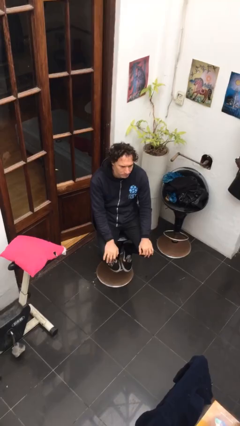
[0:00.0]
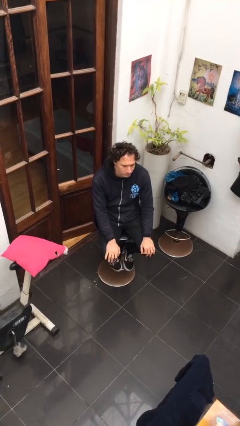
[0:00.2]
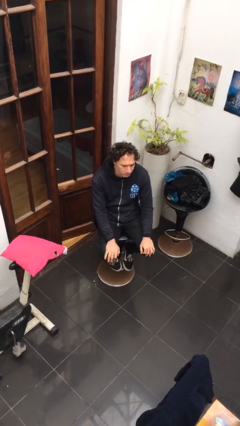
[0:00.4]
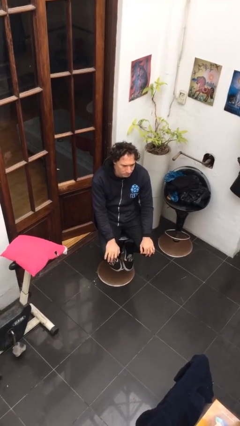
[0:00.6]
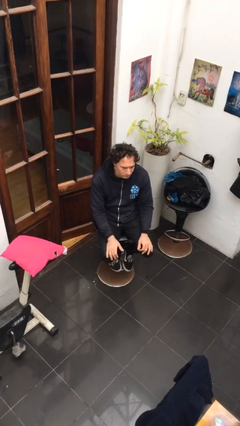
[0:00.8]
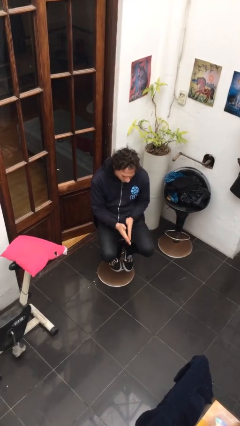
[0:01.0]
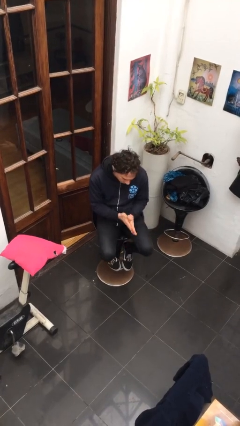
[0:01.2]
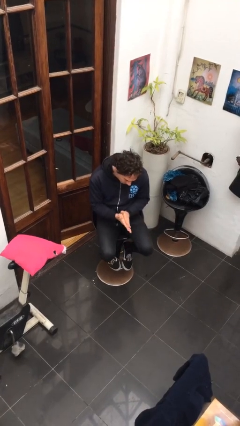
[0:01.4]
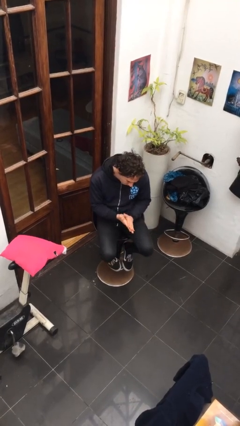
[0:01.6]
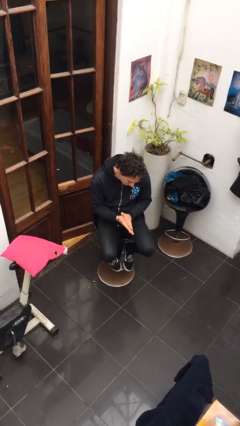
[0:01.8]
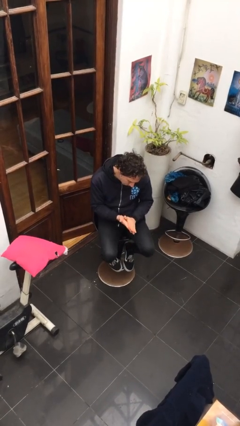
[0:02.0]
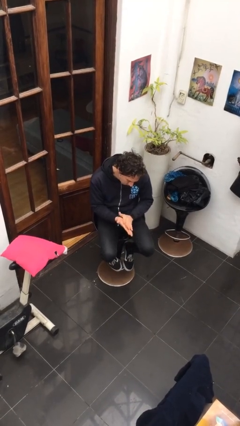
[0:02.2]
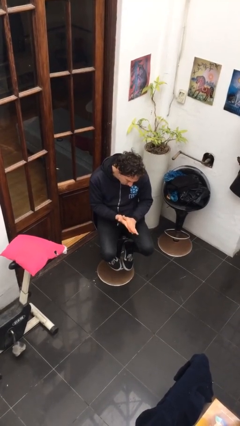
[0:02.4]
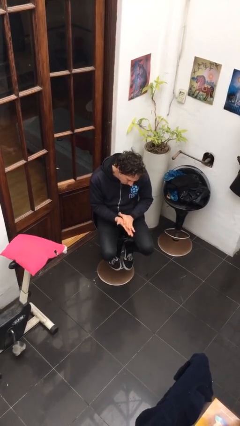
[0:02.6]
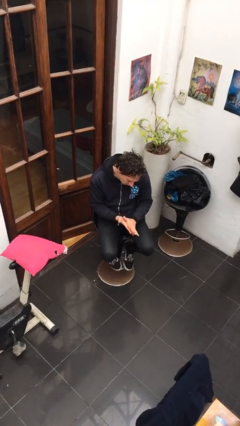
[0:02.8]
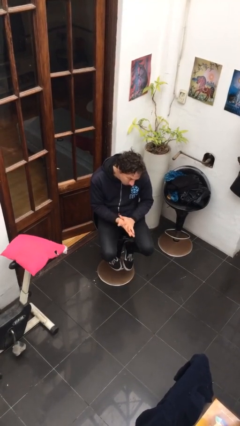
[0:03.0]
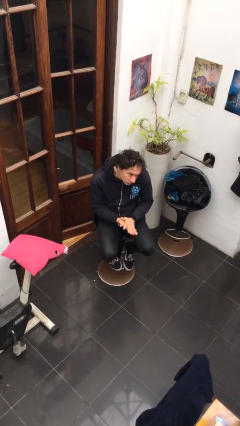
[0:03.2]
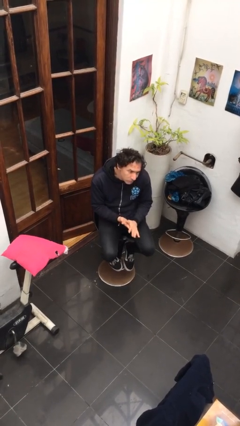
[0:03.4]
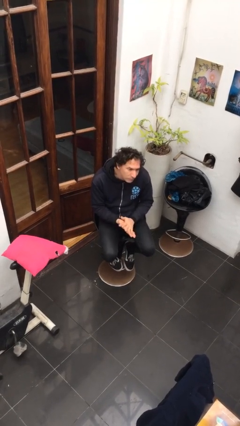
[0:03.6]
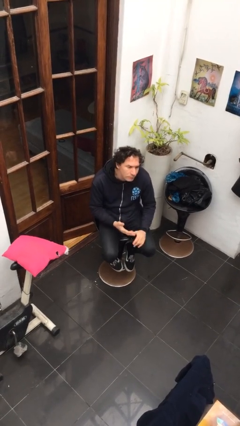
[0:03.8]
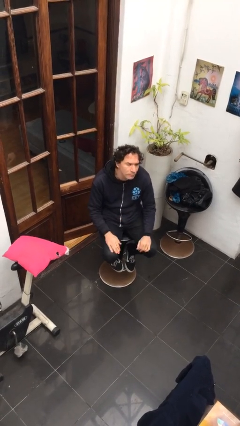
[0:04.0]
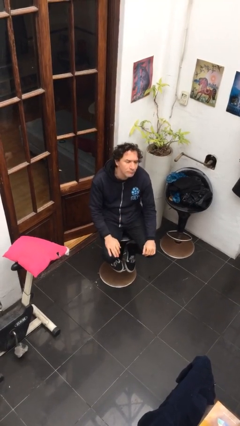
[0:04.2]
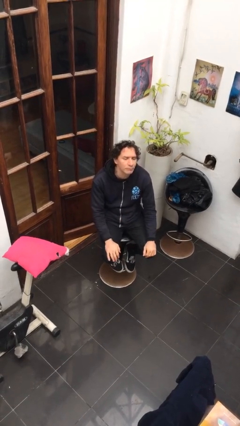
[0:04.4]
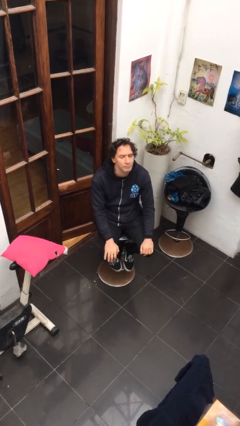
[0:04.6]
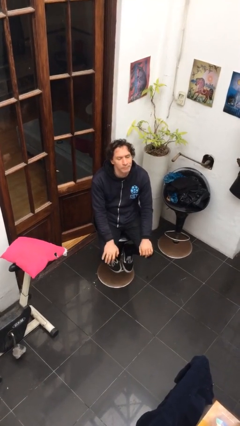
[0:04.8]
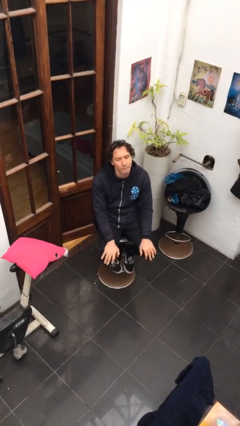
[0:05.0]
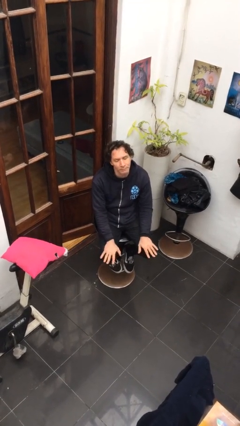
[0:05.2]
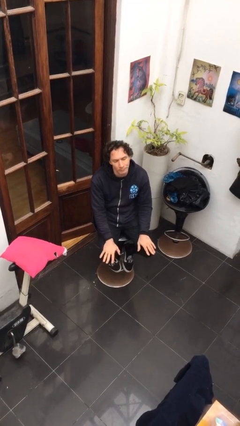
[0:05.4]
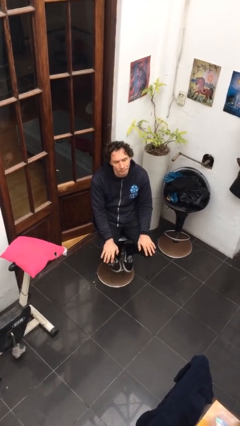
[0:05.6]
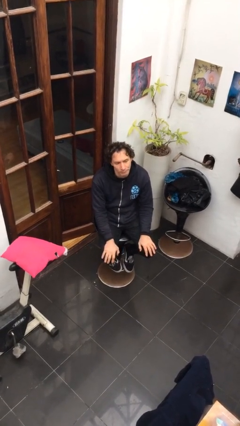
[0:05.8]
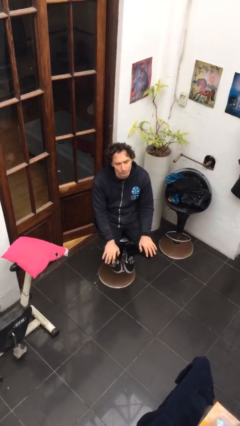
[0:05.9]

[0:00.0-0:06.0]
person looks at hands in lap

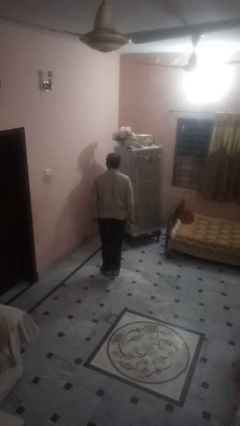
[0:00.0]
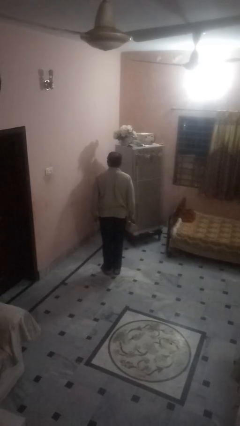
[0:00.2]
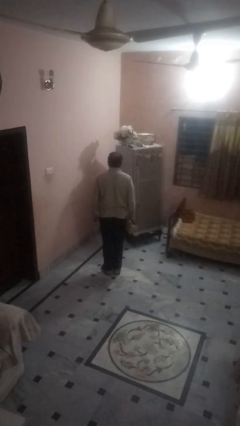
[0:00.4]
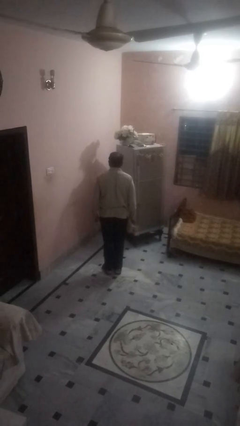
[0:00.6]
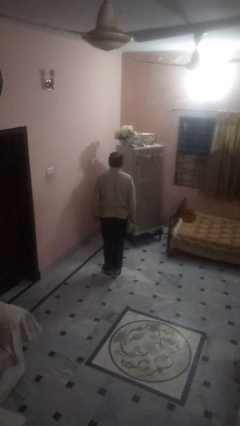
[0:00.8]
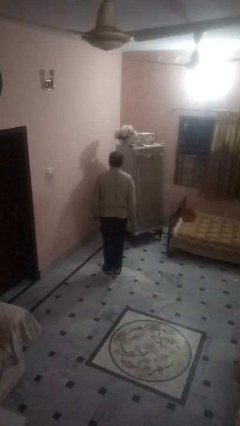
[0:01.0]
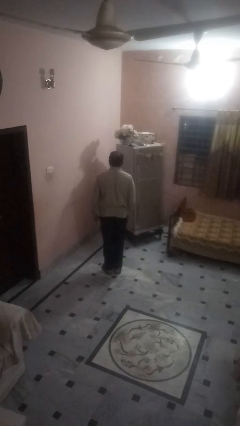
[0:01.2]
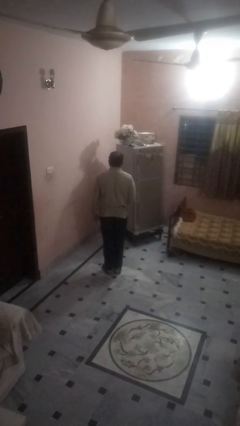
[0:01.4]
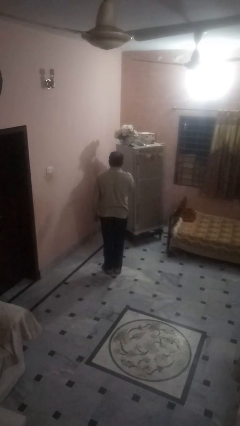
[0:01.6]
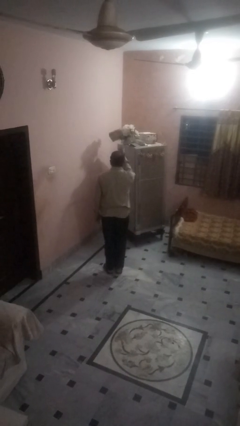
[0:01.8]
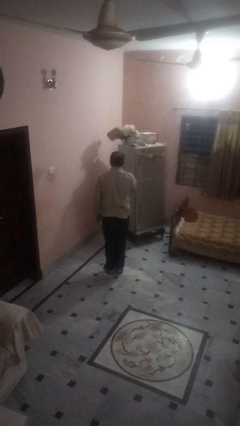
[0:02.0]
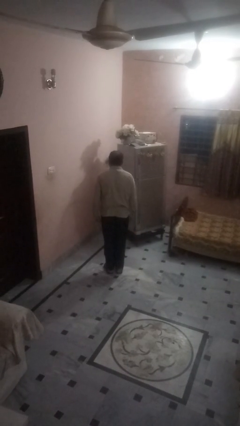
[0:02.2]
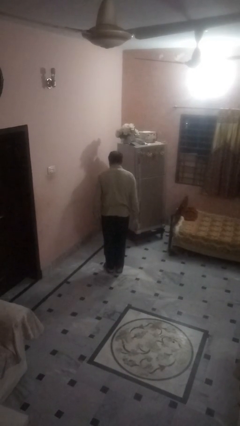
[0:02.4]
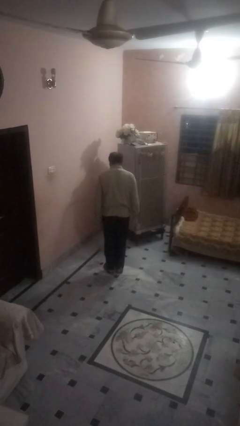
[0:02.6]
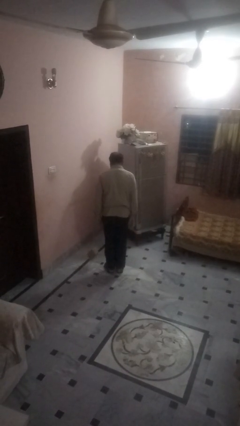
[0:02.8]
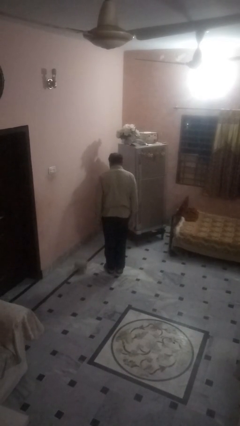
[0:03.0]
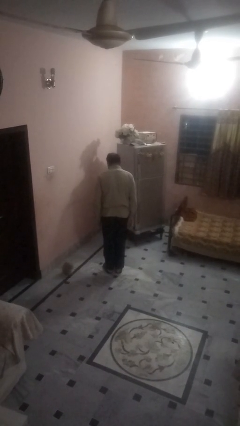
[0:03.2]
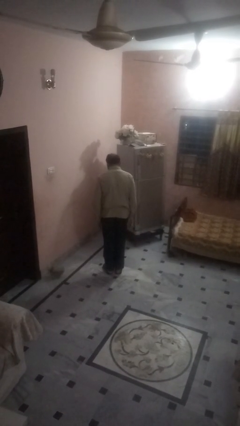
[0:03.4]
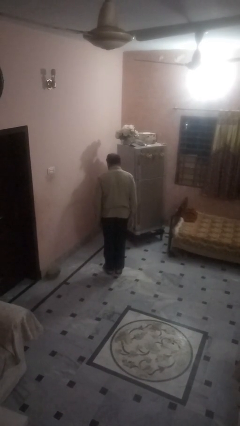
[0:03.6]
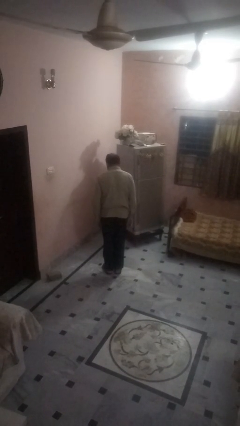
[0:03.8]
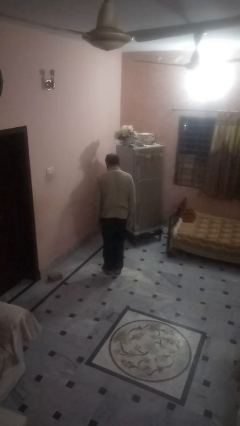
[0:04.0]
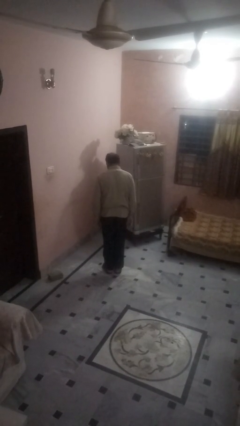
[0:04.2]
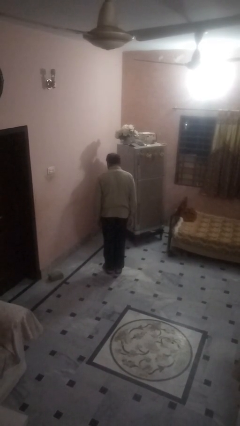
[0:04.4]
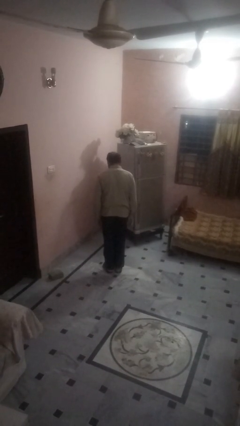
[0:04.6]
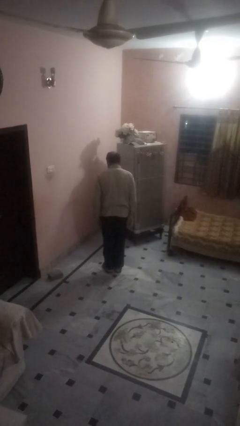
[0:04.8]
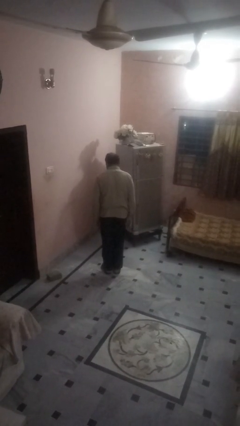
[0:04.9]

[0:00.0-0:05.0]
person throws object into air

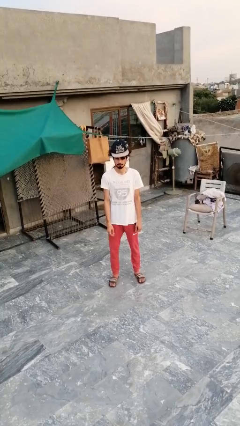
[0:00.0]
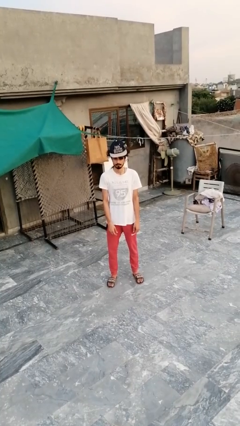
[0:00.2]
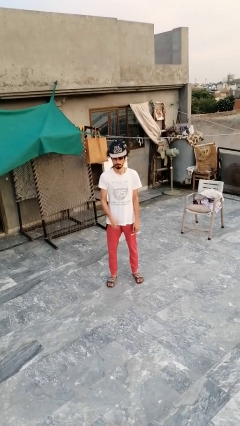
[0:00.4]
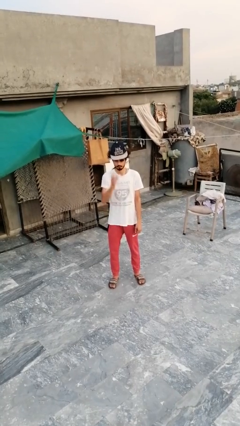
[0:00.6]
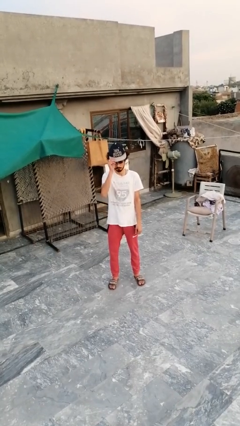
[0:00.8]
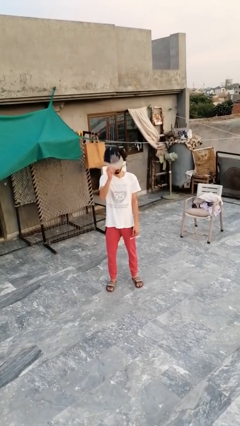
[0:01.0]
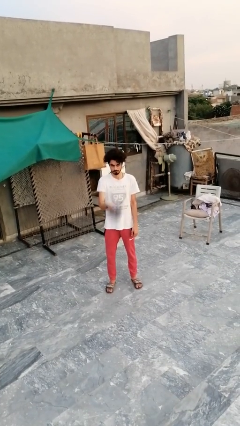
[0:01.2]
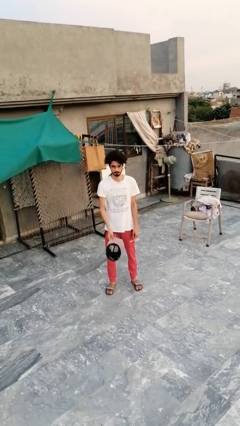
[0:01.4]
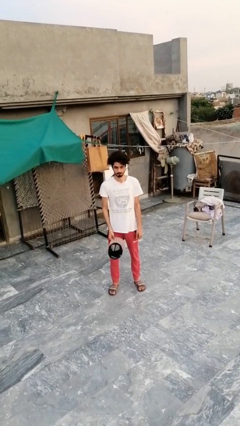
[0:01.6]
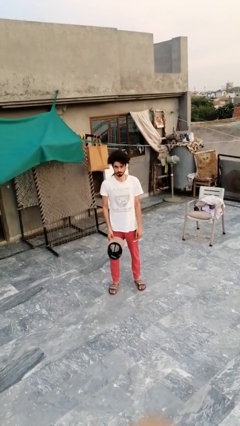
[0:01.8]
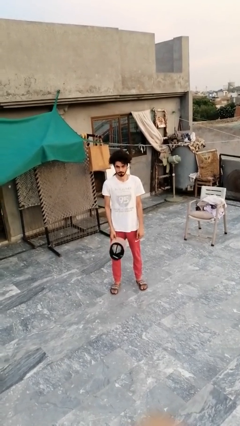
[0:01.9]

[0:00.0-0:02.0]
person takes off hat

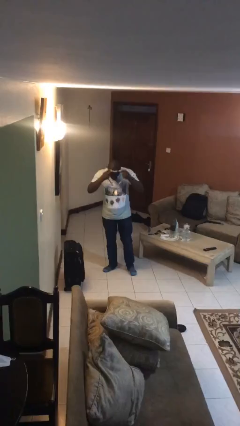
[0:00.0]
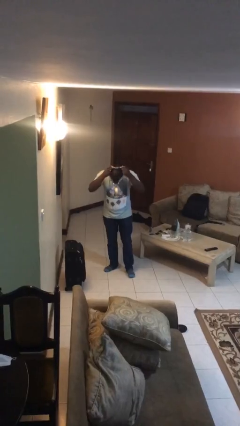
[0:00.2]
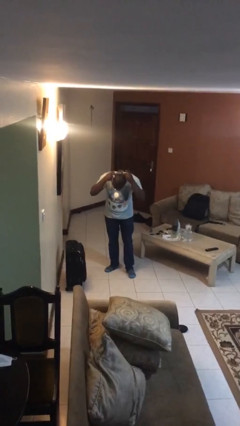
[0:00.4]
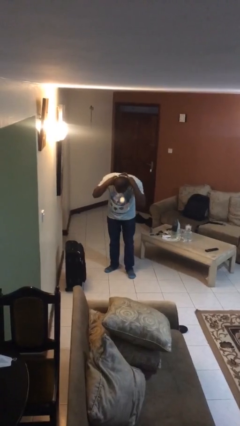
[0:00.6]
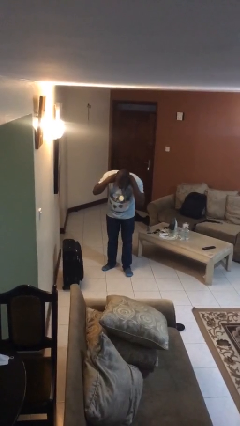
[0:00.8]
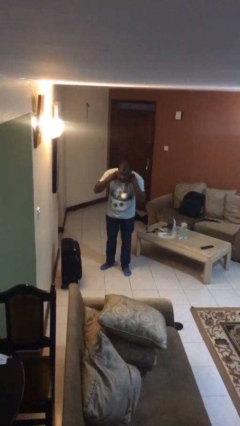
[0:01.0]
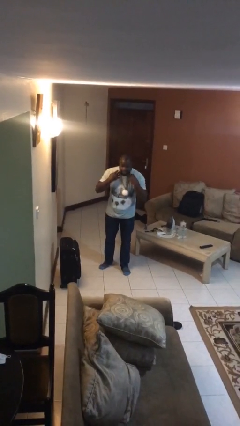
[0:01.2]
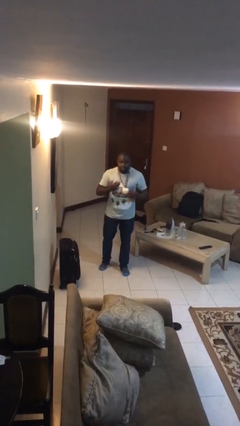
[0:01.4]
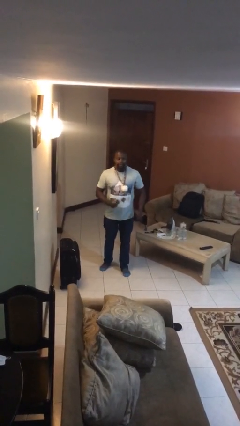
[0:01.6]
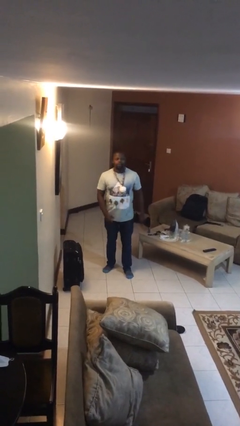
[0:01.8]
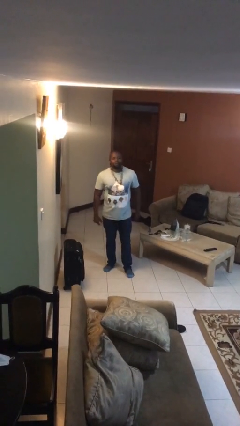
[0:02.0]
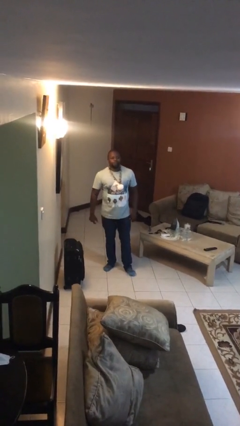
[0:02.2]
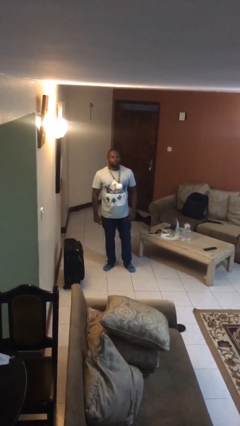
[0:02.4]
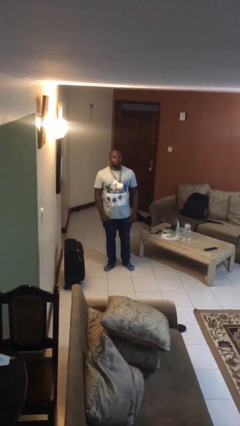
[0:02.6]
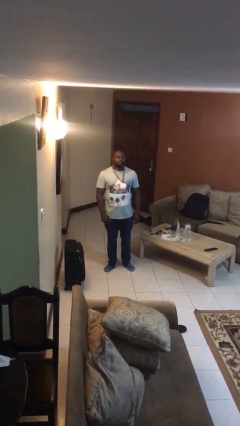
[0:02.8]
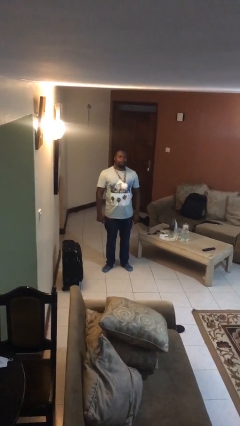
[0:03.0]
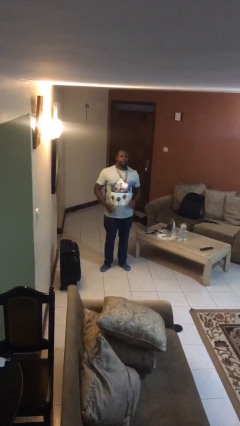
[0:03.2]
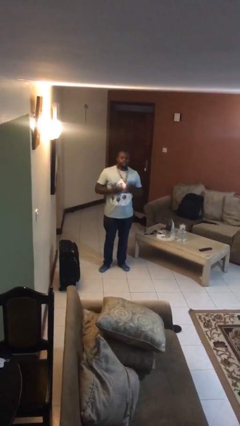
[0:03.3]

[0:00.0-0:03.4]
person puts on necklace

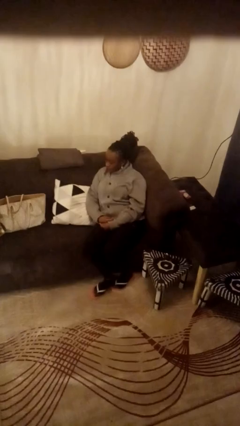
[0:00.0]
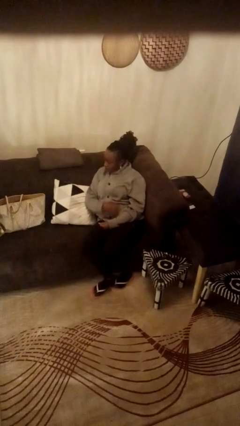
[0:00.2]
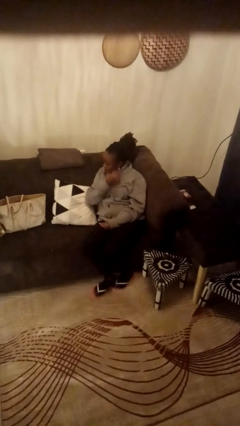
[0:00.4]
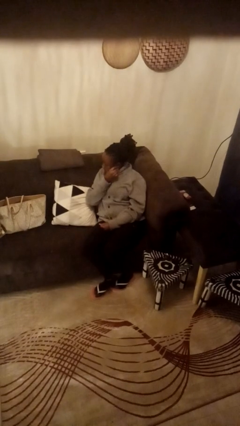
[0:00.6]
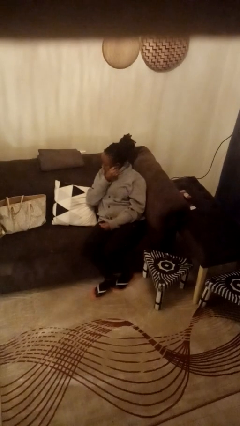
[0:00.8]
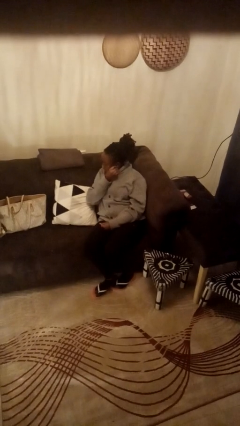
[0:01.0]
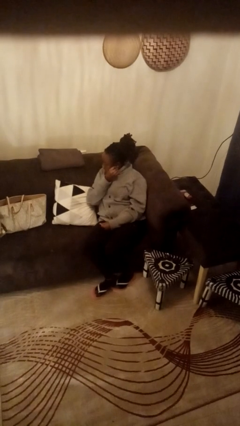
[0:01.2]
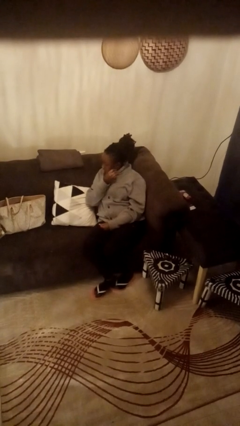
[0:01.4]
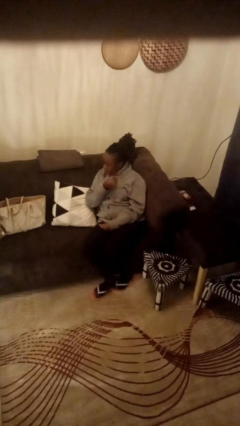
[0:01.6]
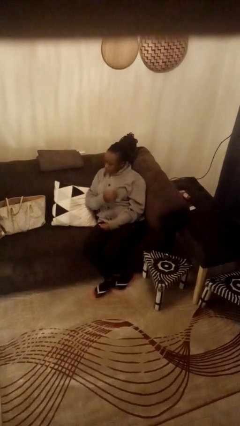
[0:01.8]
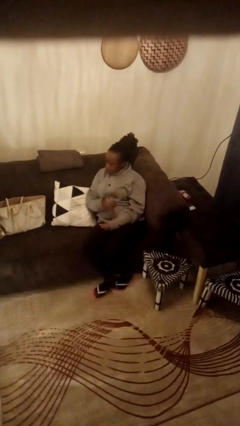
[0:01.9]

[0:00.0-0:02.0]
person takes off earrings
